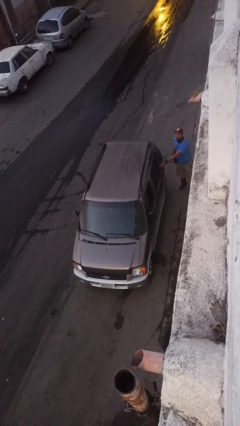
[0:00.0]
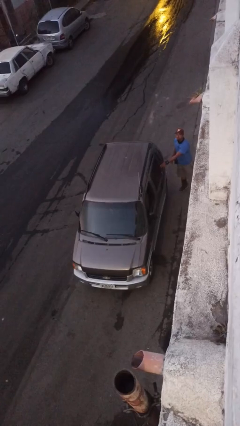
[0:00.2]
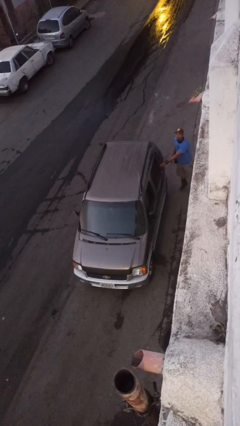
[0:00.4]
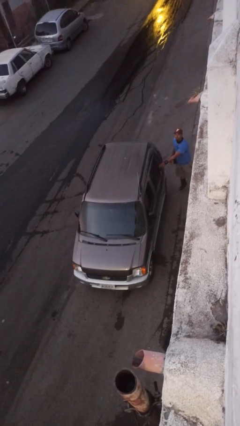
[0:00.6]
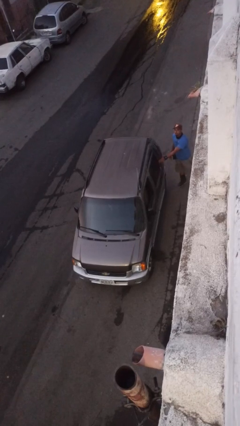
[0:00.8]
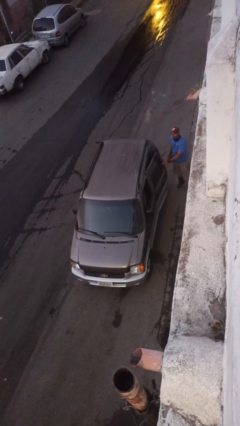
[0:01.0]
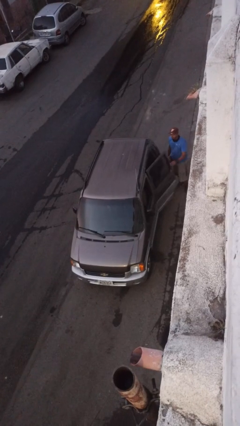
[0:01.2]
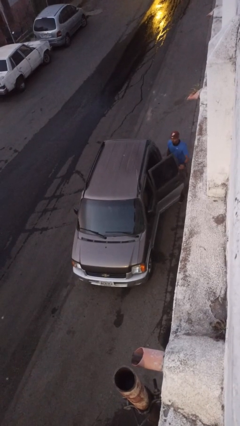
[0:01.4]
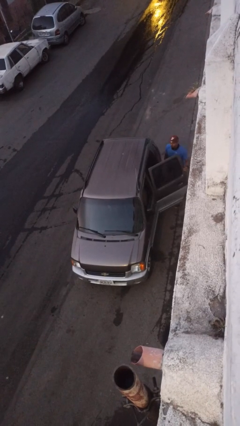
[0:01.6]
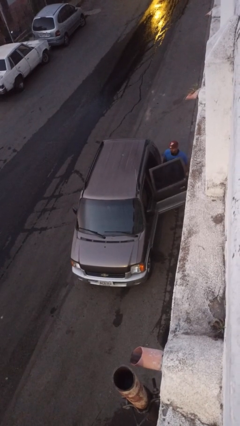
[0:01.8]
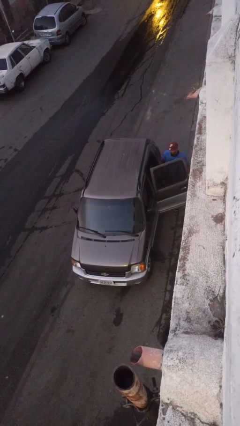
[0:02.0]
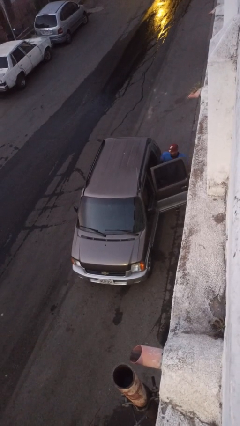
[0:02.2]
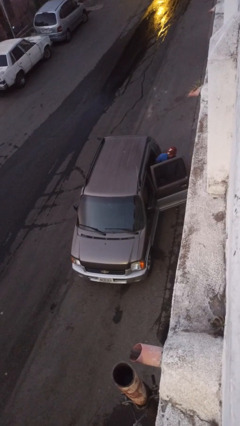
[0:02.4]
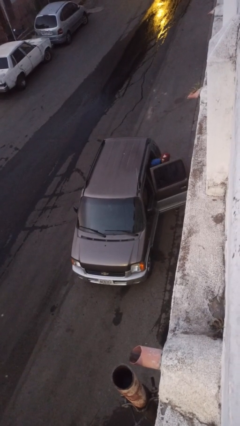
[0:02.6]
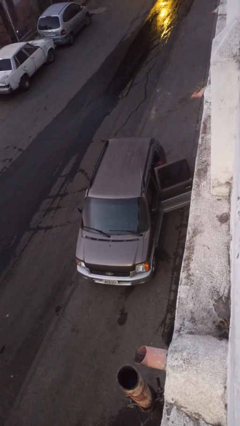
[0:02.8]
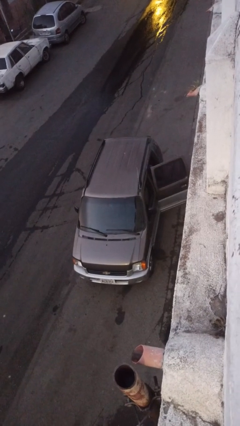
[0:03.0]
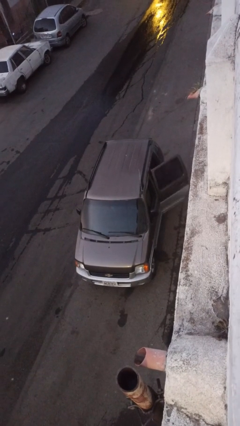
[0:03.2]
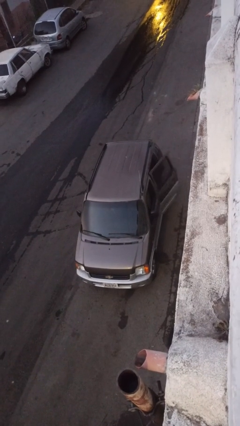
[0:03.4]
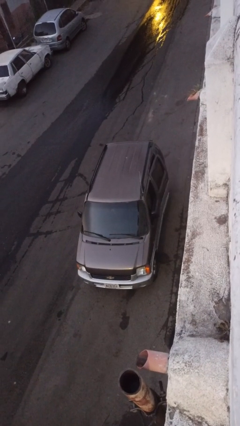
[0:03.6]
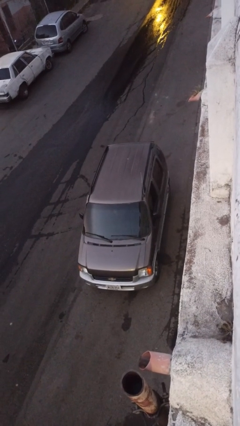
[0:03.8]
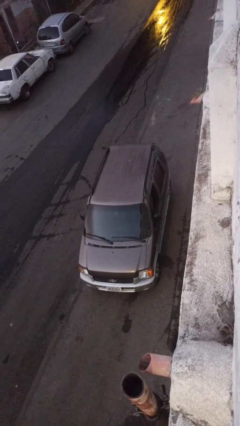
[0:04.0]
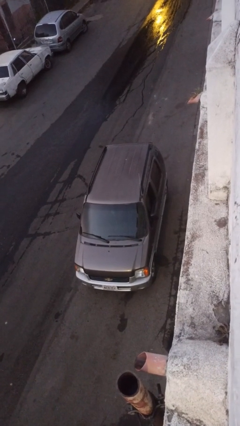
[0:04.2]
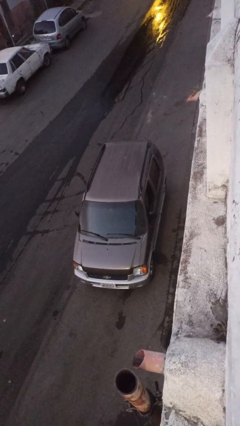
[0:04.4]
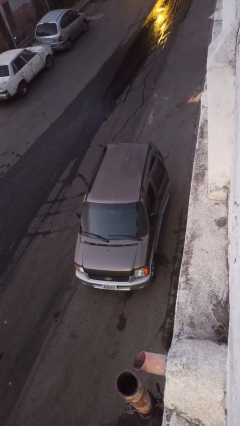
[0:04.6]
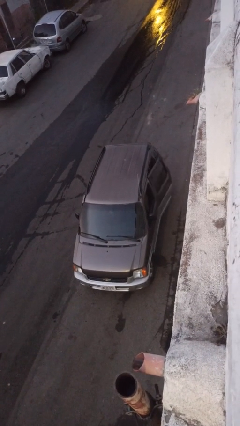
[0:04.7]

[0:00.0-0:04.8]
car picks up person

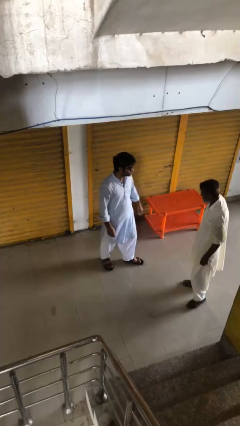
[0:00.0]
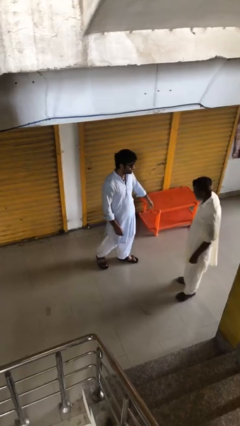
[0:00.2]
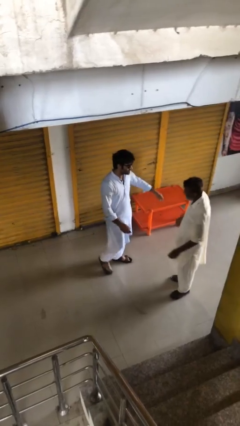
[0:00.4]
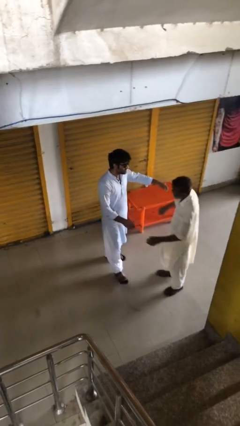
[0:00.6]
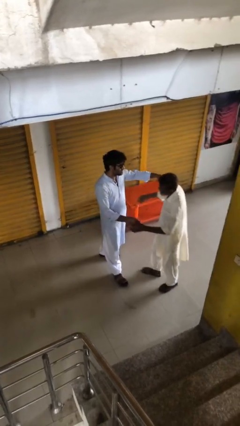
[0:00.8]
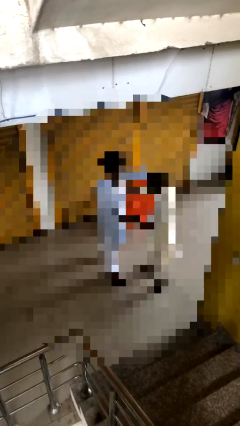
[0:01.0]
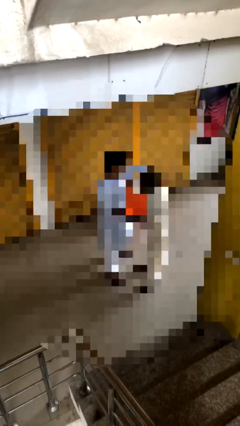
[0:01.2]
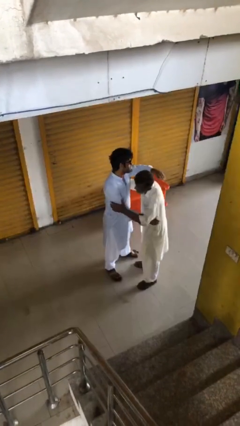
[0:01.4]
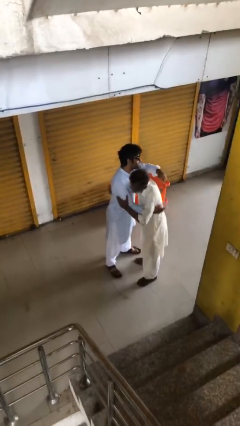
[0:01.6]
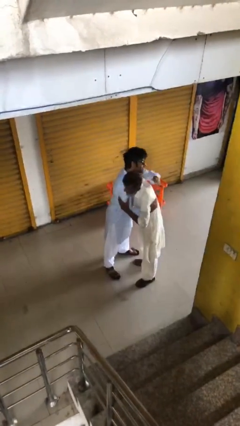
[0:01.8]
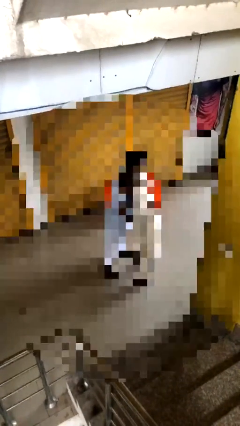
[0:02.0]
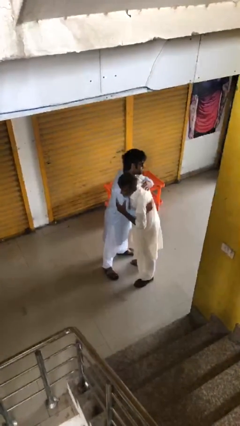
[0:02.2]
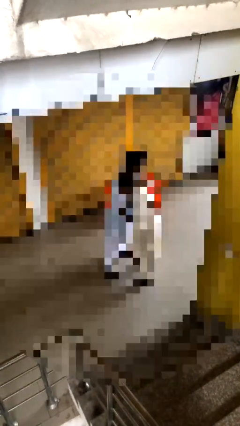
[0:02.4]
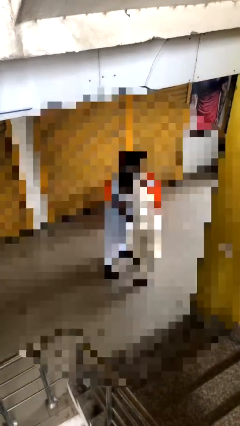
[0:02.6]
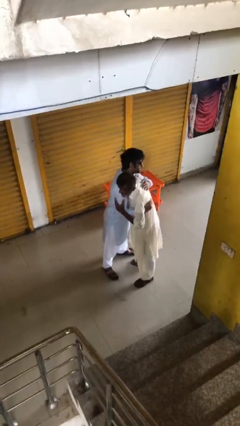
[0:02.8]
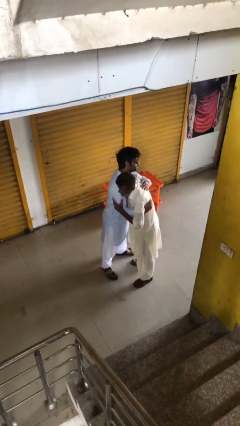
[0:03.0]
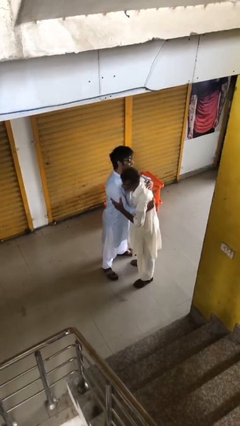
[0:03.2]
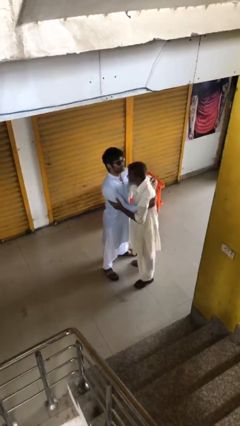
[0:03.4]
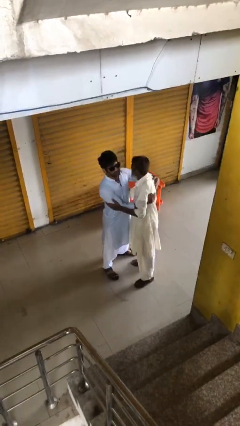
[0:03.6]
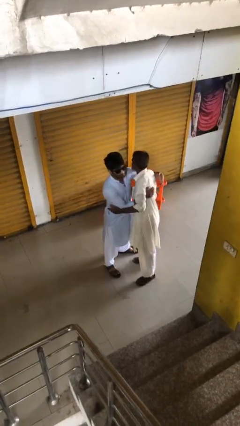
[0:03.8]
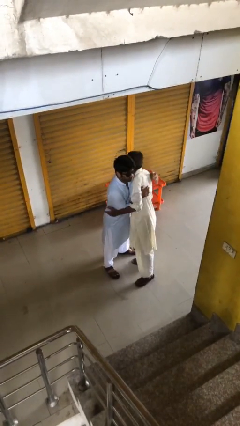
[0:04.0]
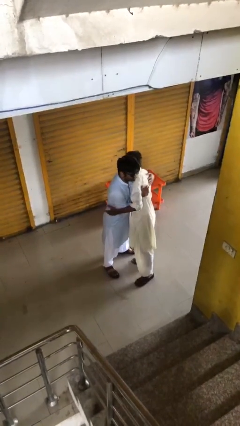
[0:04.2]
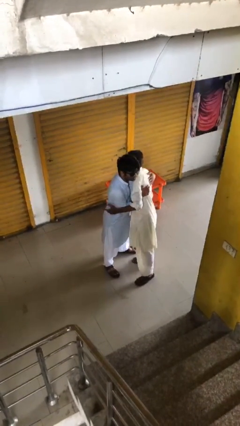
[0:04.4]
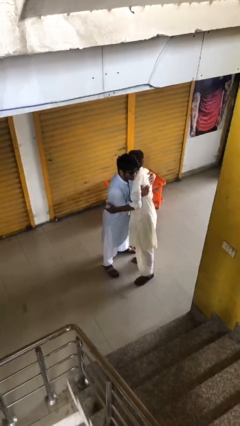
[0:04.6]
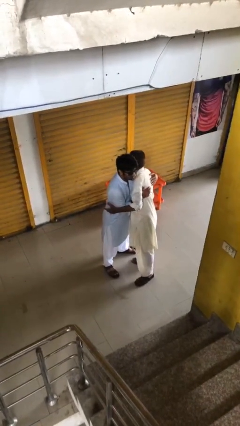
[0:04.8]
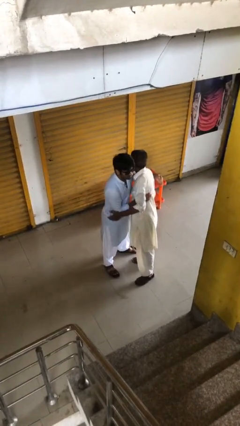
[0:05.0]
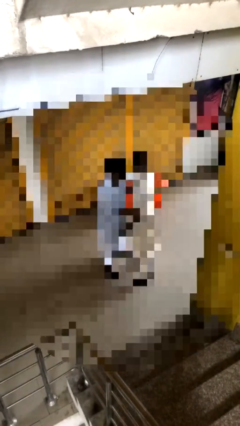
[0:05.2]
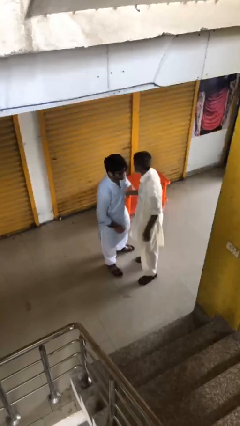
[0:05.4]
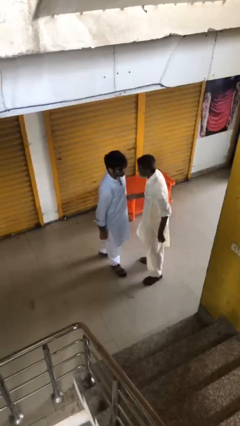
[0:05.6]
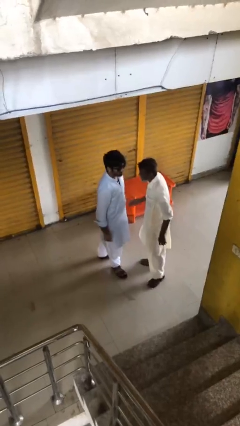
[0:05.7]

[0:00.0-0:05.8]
person embraces person

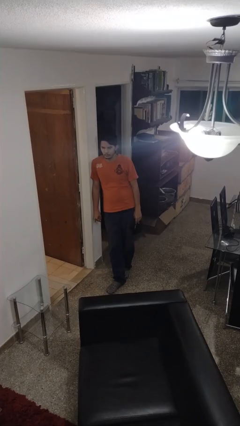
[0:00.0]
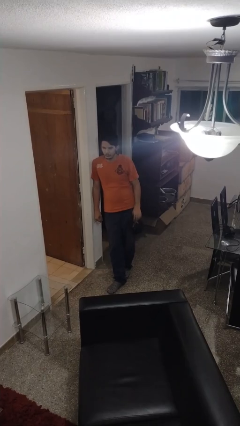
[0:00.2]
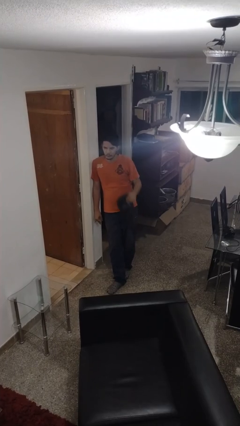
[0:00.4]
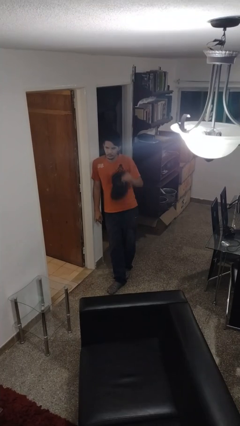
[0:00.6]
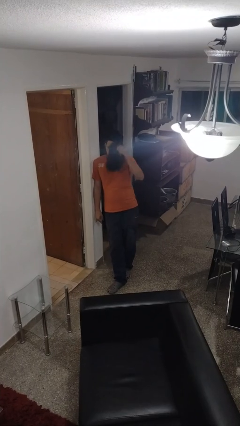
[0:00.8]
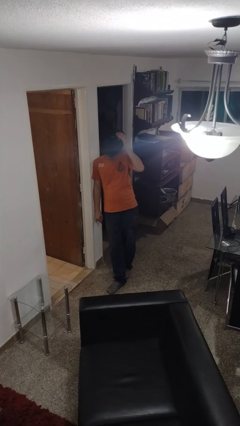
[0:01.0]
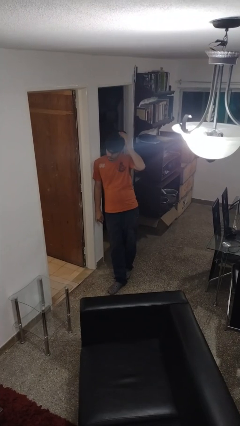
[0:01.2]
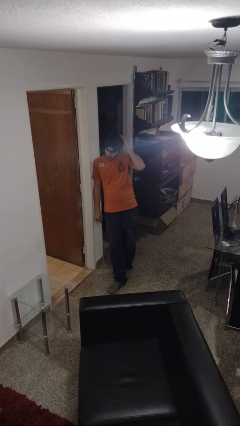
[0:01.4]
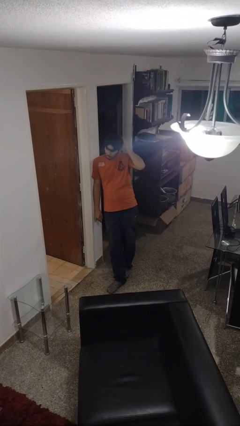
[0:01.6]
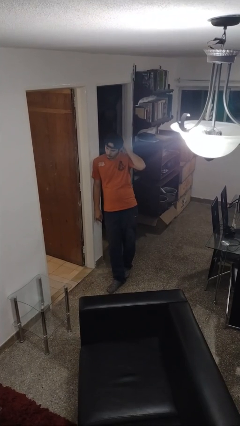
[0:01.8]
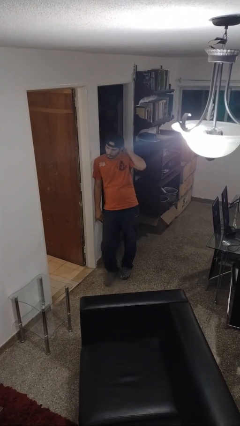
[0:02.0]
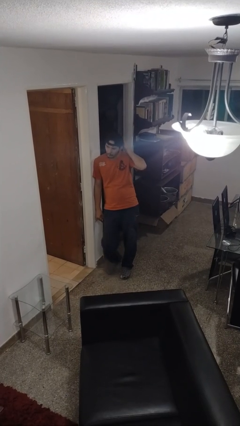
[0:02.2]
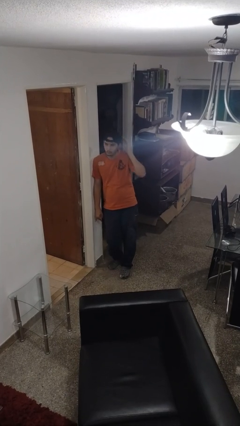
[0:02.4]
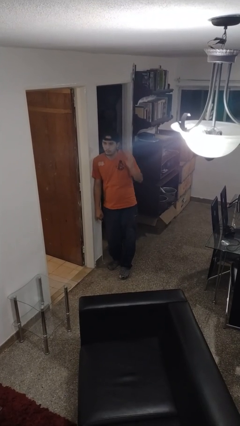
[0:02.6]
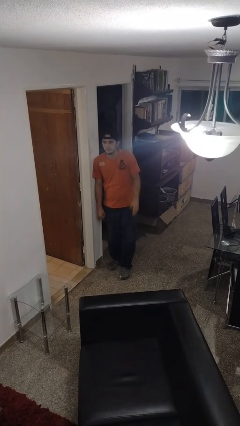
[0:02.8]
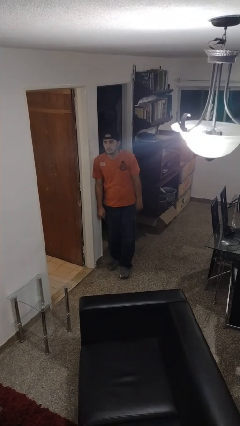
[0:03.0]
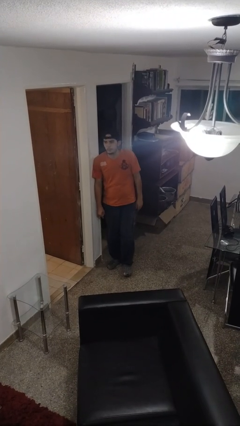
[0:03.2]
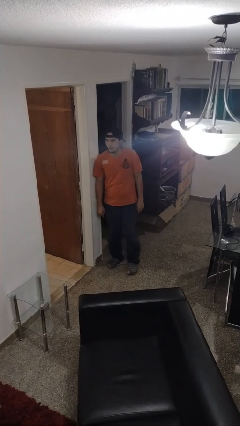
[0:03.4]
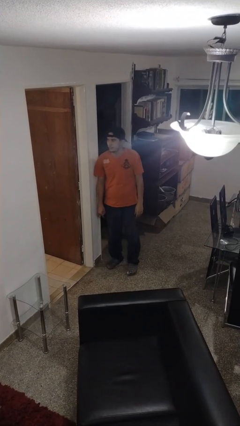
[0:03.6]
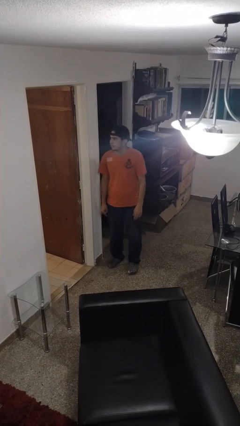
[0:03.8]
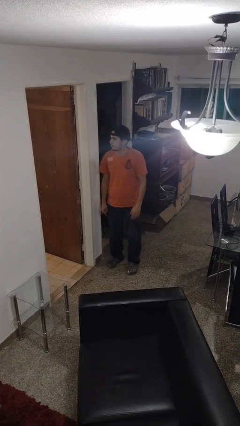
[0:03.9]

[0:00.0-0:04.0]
person puts on hat

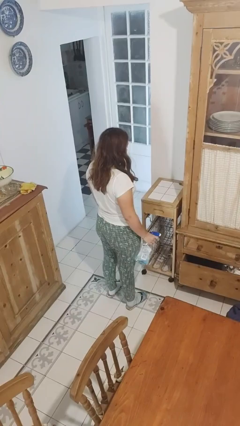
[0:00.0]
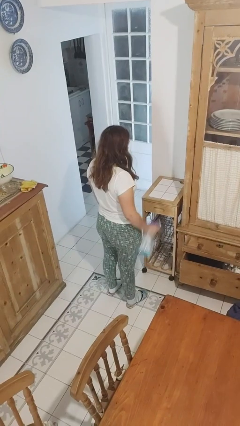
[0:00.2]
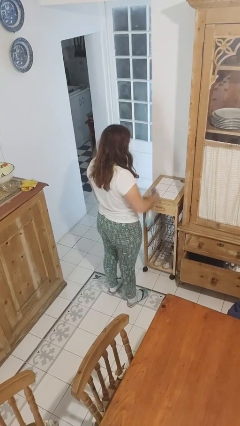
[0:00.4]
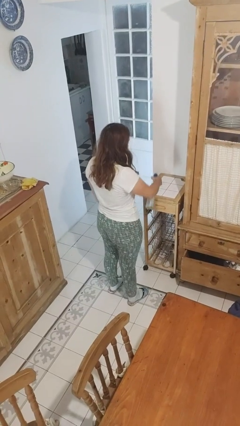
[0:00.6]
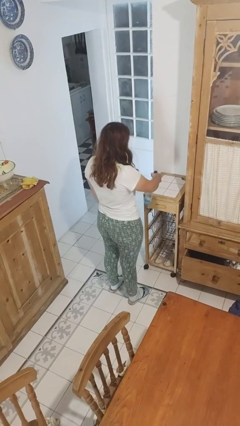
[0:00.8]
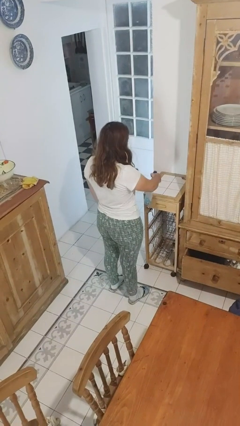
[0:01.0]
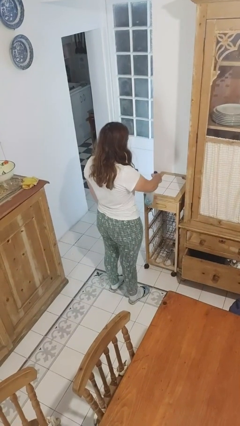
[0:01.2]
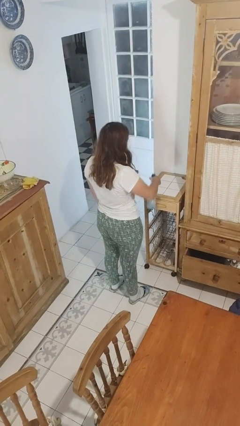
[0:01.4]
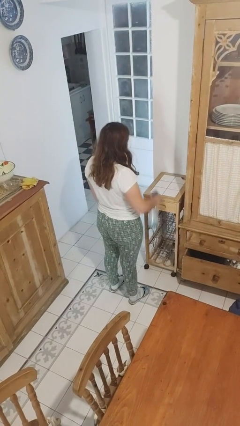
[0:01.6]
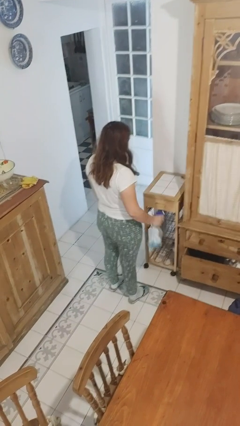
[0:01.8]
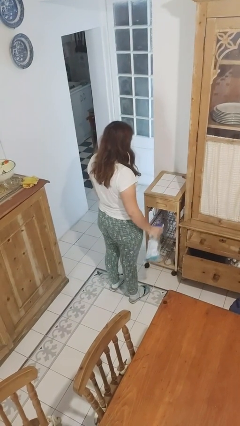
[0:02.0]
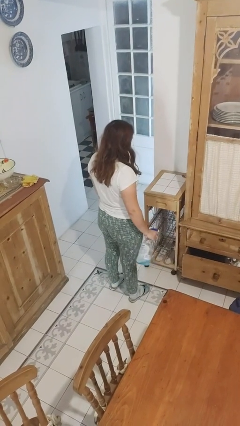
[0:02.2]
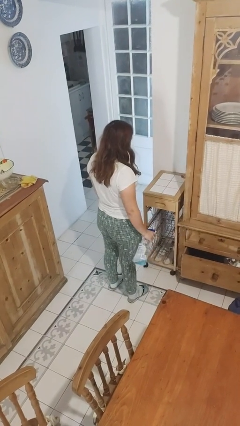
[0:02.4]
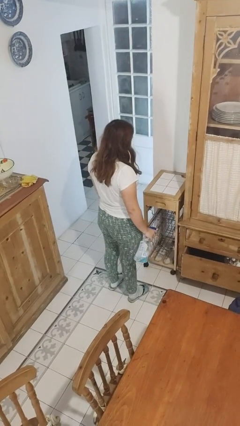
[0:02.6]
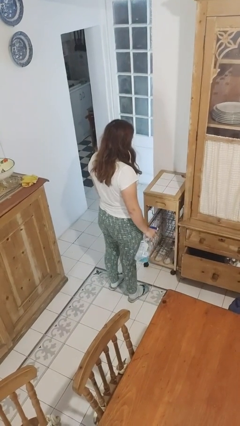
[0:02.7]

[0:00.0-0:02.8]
person sprays from bottle

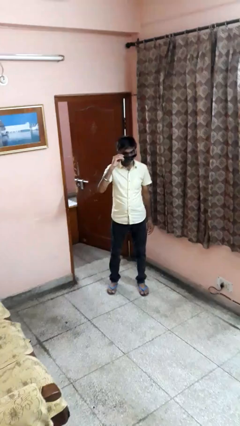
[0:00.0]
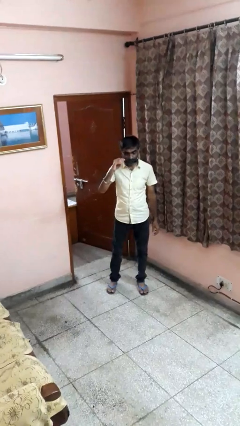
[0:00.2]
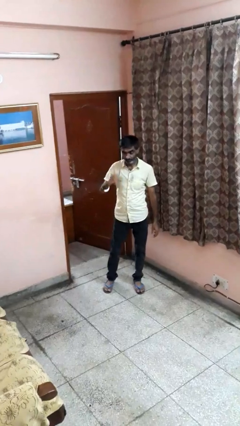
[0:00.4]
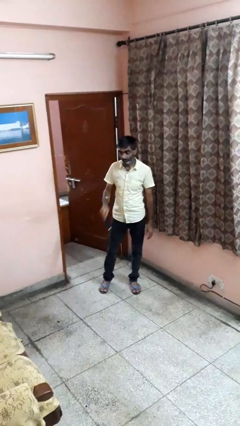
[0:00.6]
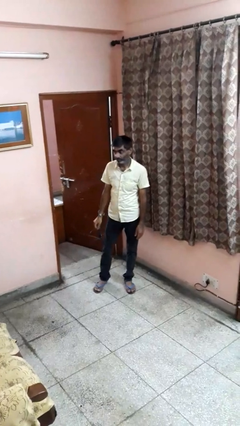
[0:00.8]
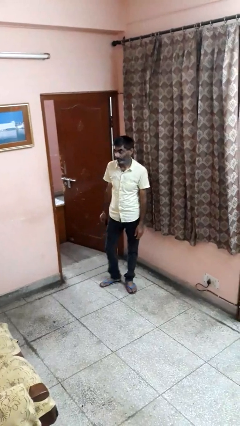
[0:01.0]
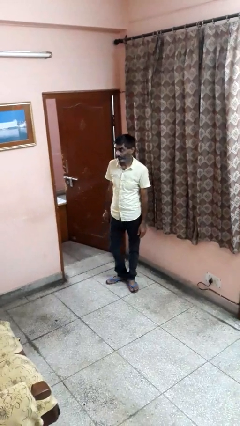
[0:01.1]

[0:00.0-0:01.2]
person takes off sunglasses
